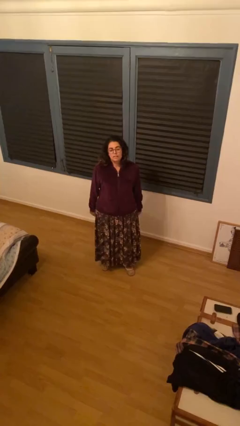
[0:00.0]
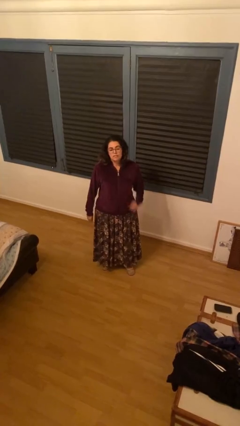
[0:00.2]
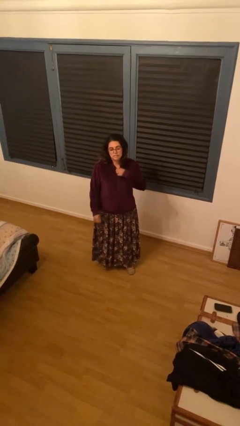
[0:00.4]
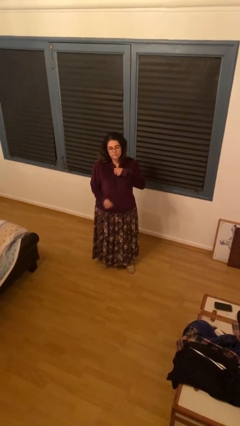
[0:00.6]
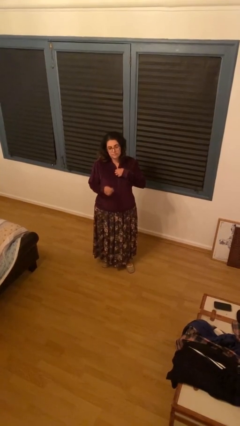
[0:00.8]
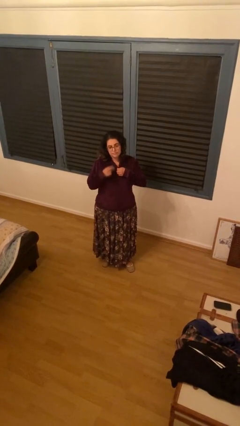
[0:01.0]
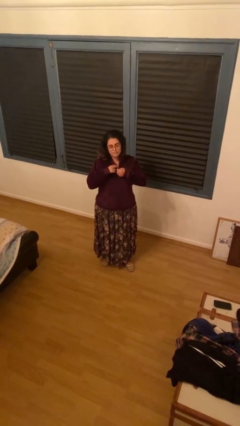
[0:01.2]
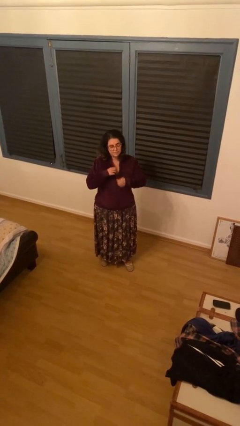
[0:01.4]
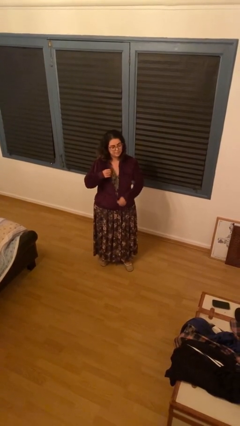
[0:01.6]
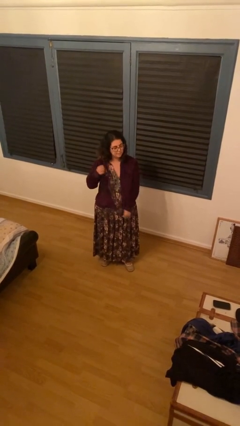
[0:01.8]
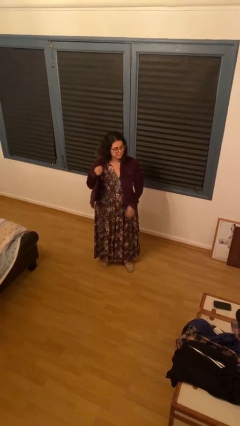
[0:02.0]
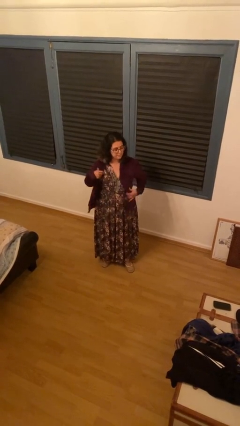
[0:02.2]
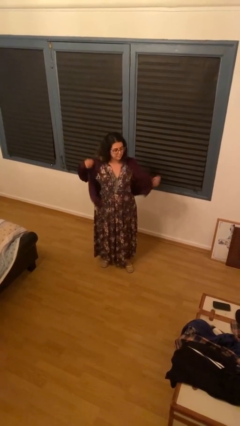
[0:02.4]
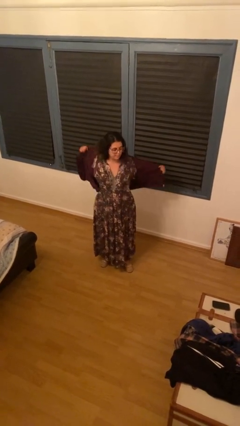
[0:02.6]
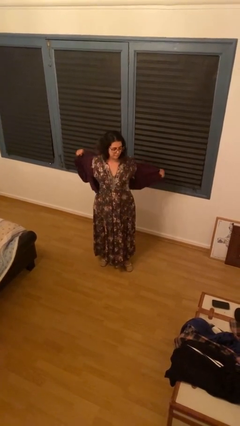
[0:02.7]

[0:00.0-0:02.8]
person unzips jacket

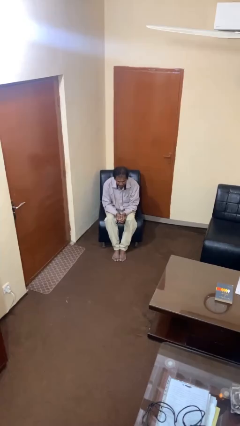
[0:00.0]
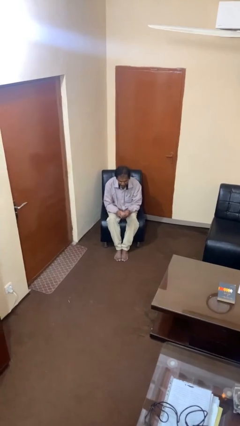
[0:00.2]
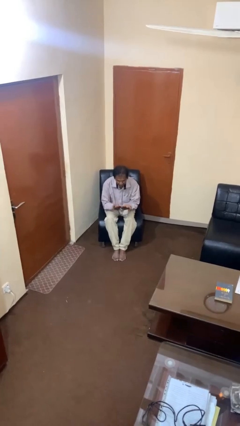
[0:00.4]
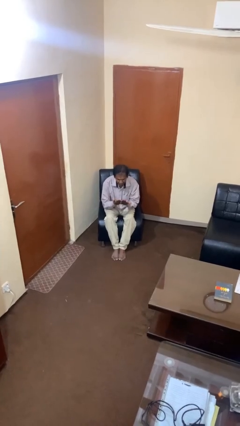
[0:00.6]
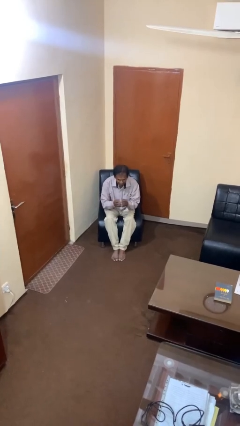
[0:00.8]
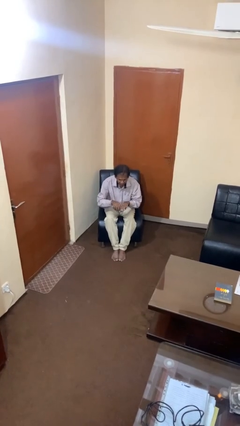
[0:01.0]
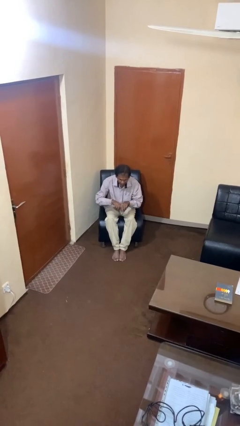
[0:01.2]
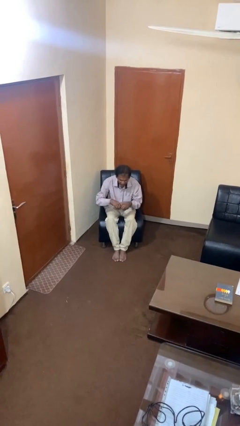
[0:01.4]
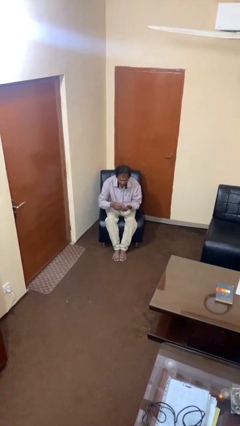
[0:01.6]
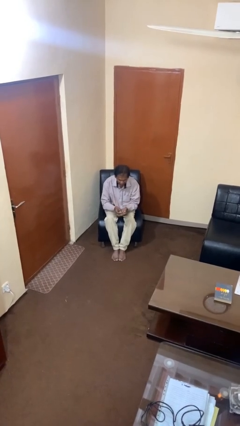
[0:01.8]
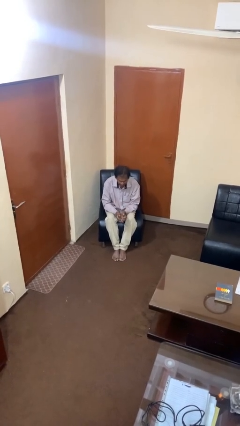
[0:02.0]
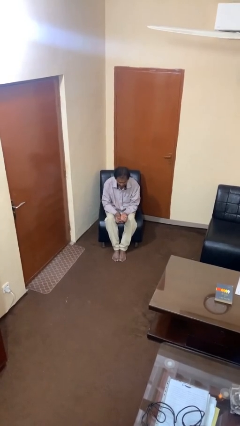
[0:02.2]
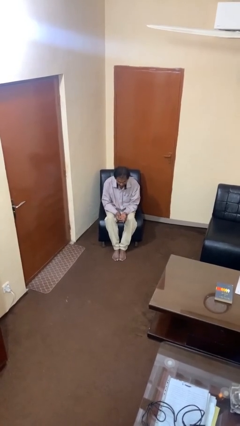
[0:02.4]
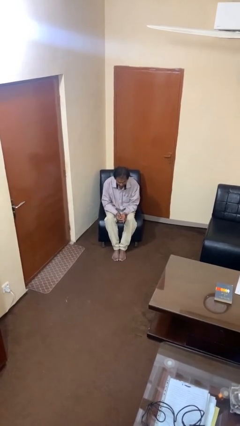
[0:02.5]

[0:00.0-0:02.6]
person looks at hands in lap

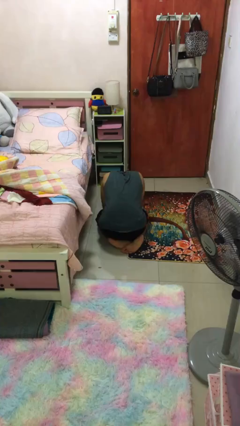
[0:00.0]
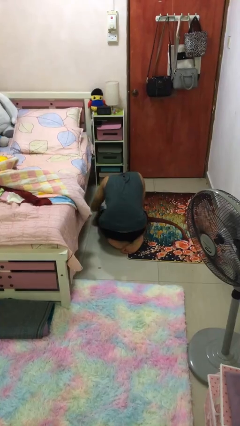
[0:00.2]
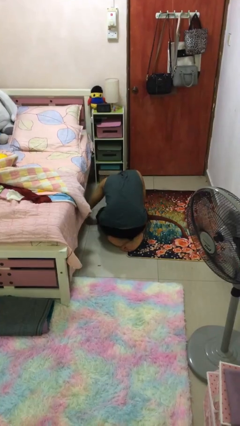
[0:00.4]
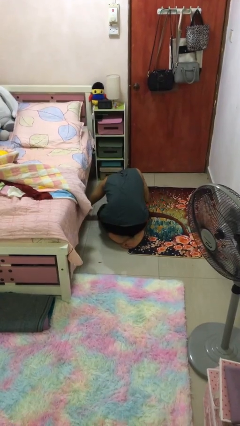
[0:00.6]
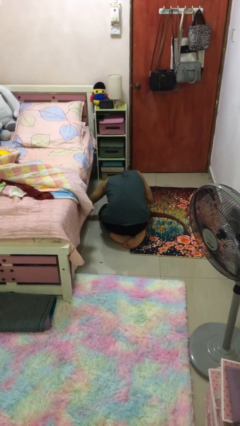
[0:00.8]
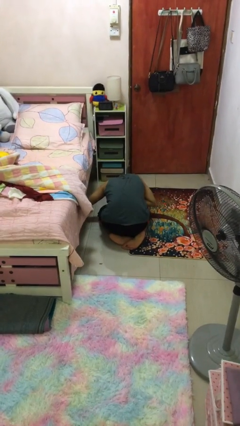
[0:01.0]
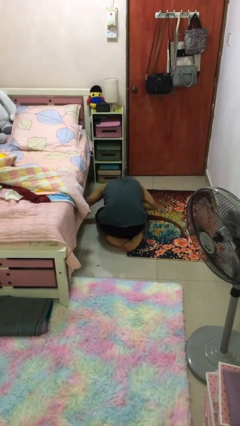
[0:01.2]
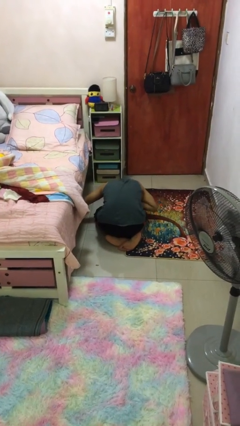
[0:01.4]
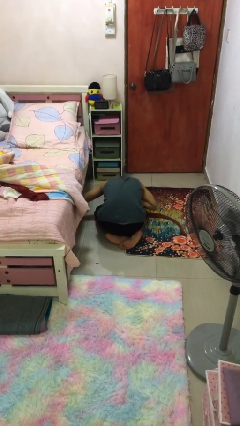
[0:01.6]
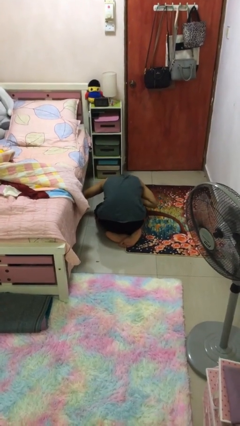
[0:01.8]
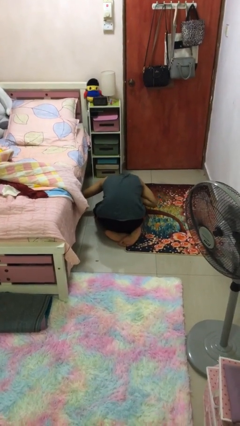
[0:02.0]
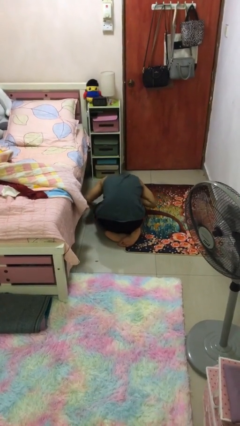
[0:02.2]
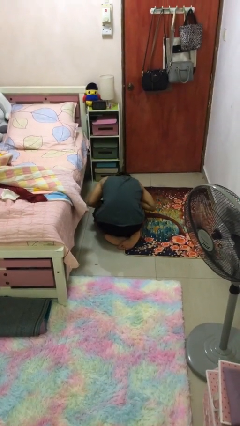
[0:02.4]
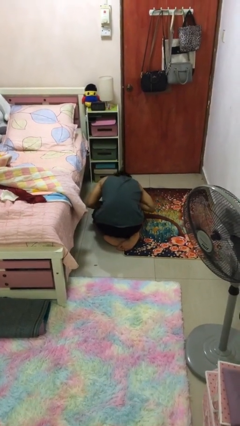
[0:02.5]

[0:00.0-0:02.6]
person searches under bed

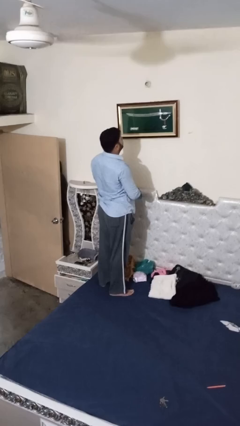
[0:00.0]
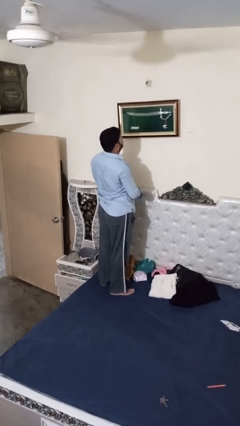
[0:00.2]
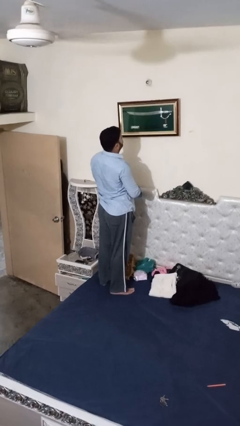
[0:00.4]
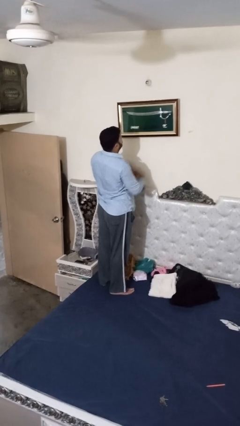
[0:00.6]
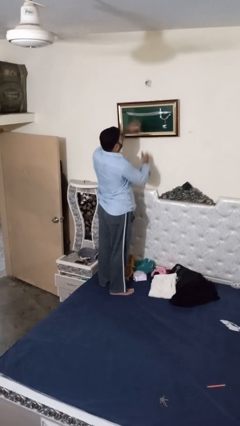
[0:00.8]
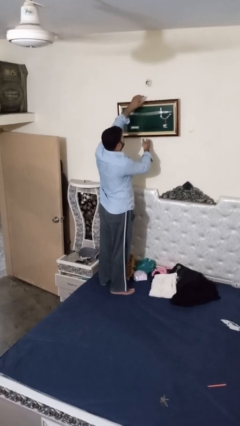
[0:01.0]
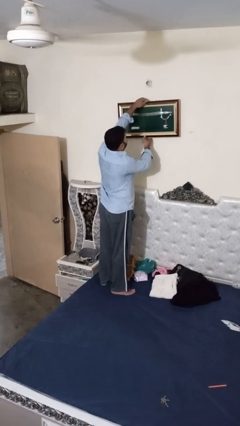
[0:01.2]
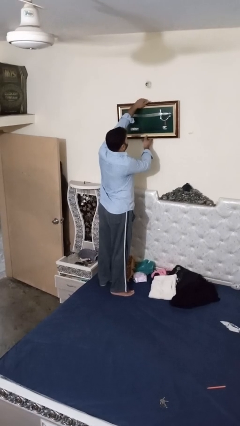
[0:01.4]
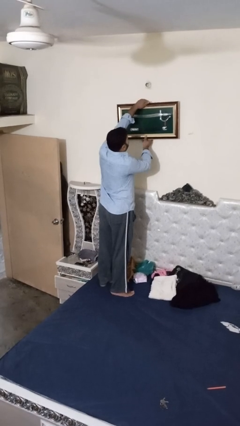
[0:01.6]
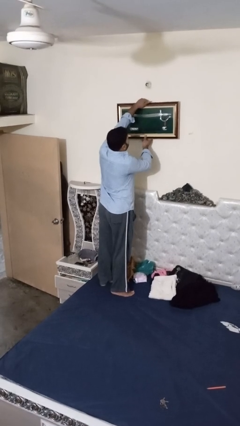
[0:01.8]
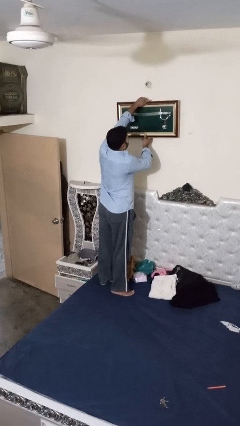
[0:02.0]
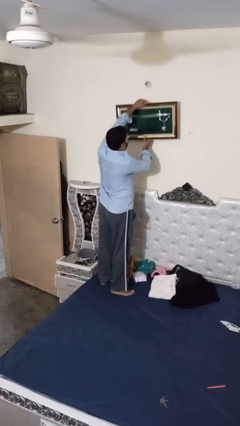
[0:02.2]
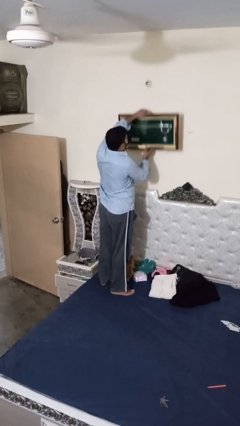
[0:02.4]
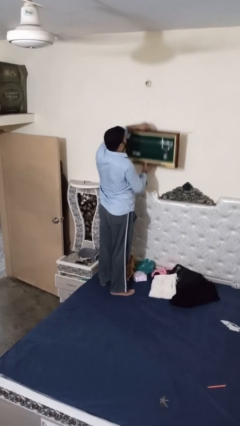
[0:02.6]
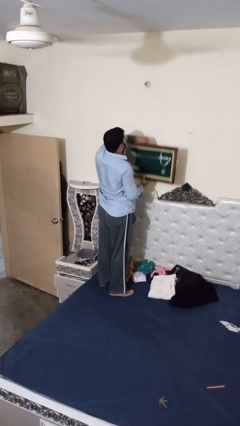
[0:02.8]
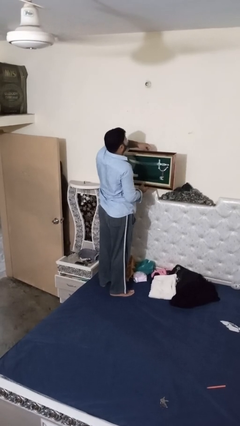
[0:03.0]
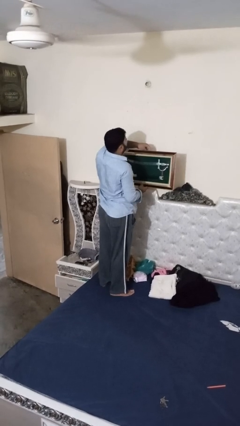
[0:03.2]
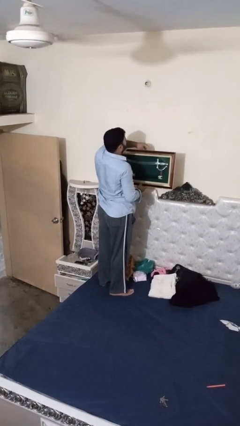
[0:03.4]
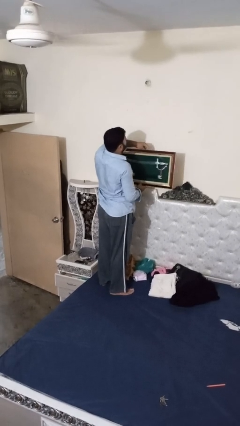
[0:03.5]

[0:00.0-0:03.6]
person takes down picture frame

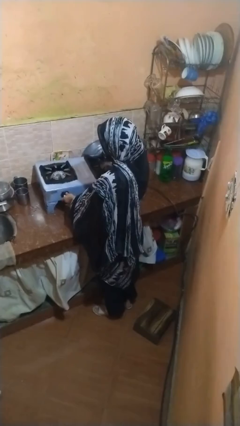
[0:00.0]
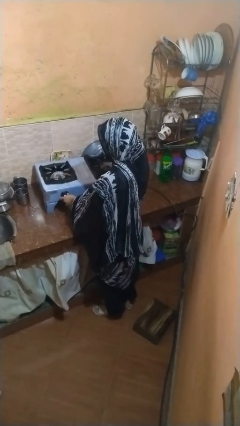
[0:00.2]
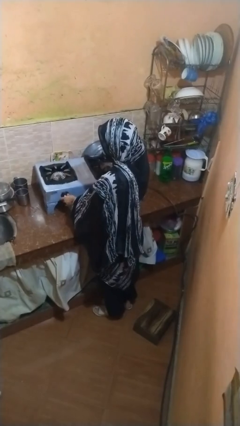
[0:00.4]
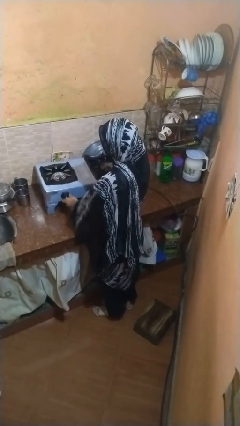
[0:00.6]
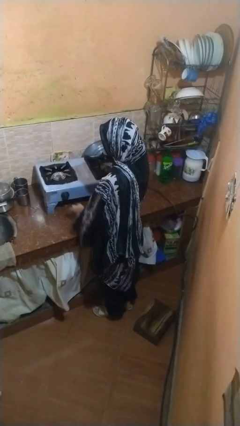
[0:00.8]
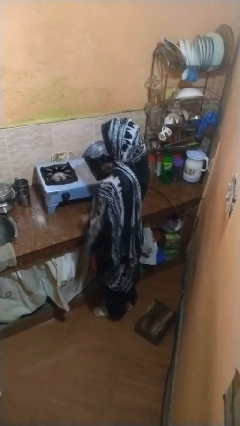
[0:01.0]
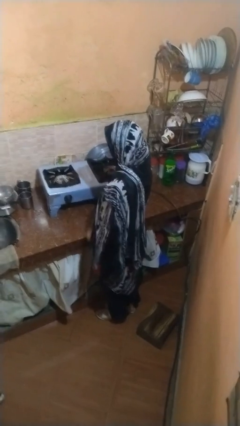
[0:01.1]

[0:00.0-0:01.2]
person turns off stovetop

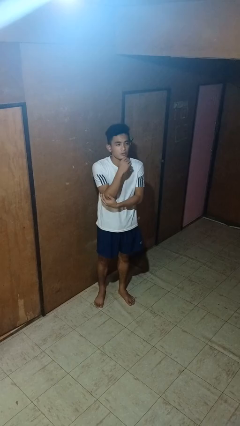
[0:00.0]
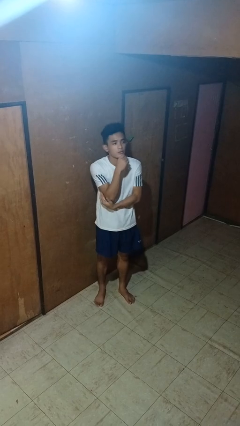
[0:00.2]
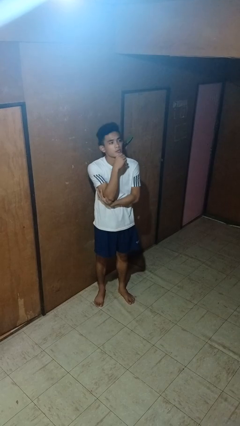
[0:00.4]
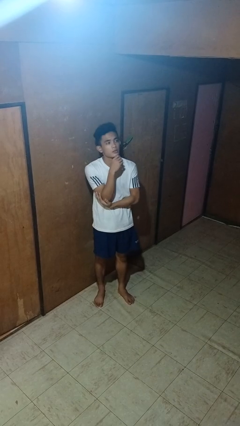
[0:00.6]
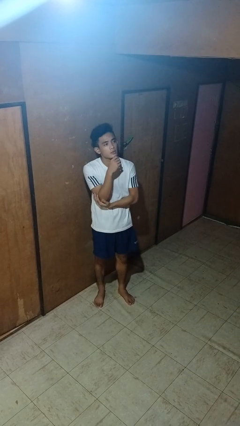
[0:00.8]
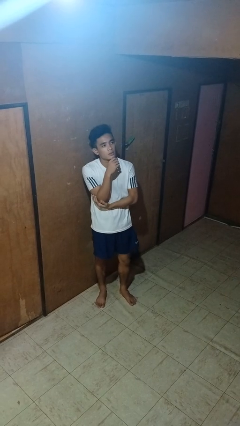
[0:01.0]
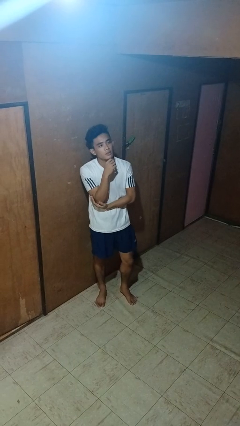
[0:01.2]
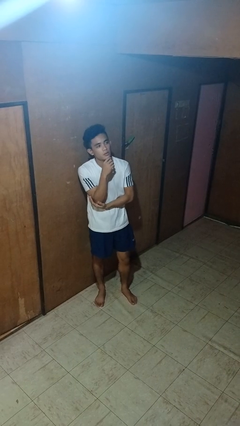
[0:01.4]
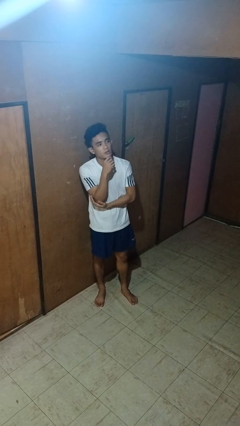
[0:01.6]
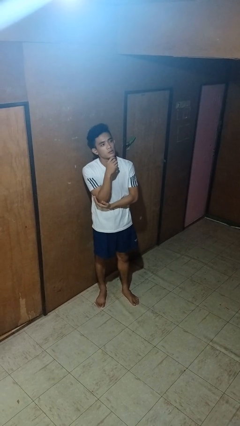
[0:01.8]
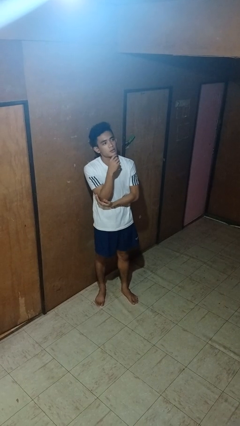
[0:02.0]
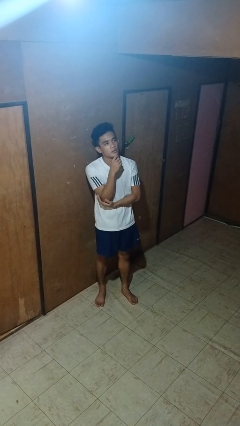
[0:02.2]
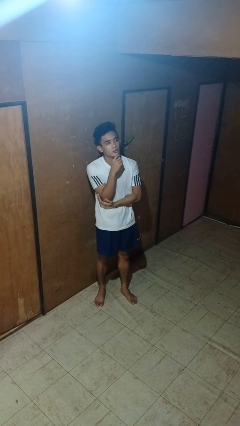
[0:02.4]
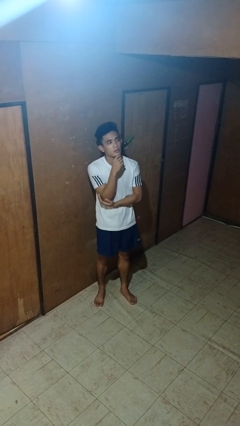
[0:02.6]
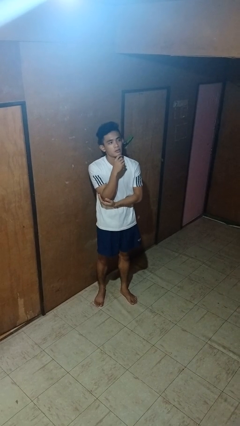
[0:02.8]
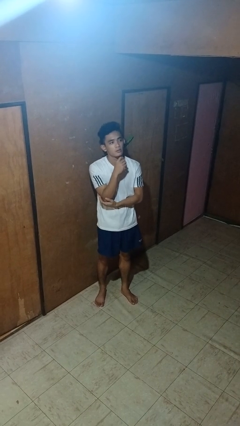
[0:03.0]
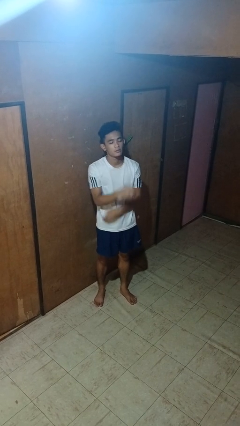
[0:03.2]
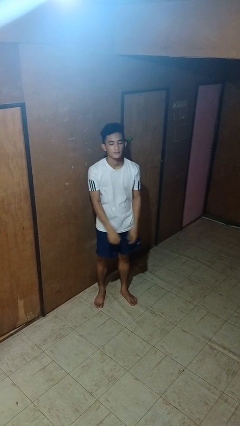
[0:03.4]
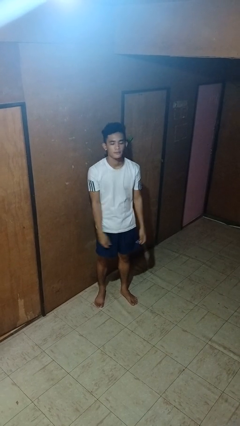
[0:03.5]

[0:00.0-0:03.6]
person strokes chin

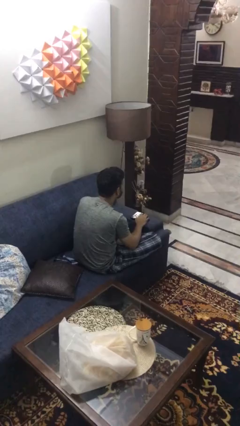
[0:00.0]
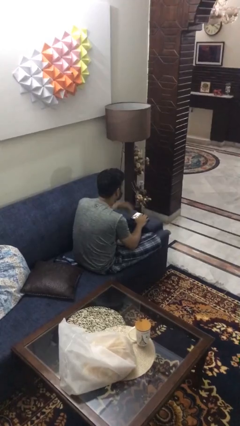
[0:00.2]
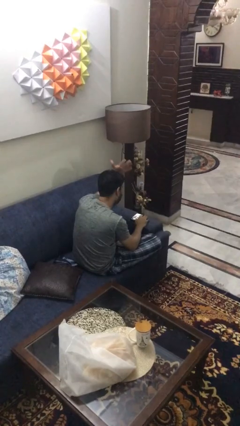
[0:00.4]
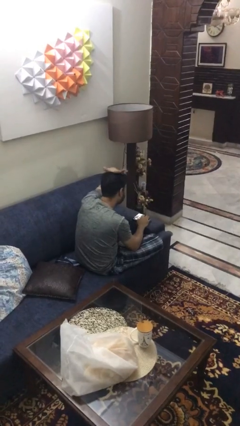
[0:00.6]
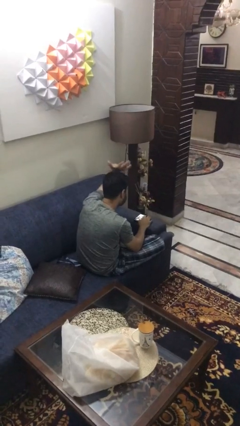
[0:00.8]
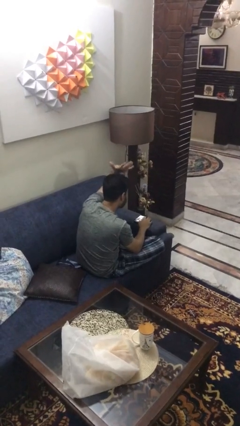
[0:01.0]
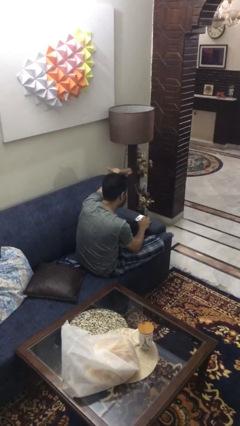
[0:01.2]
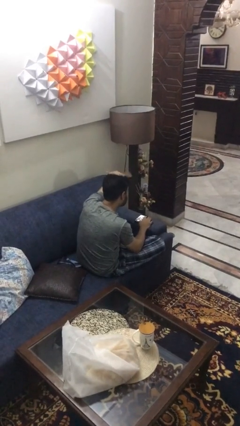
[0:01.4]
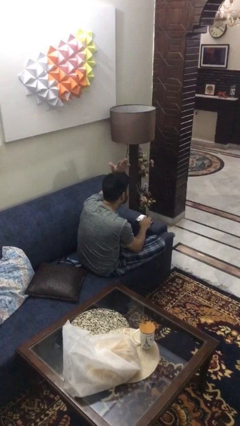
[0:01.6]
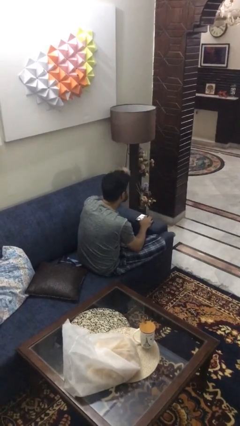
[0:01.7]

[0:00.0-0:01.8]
person pats head
